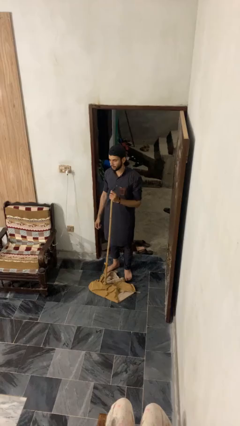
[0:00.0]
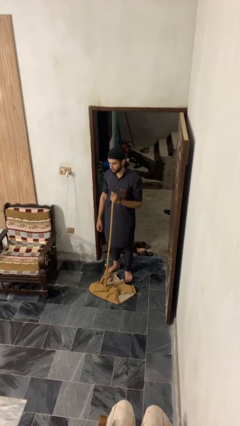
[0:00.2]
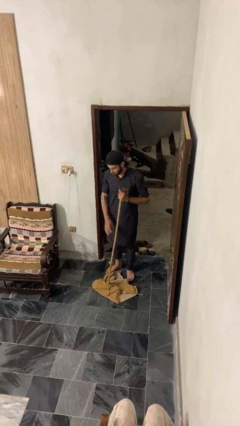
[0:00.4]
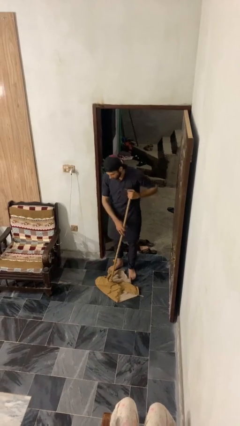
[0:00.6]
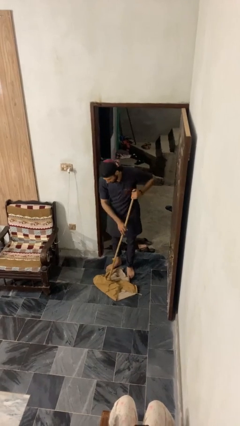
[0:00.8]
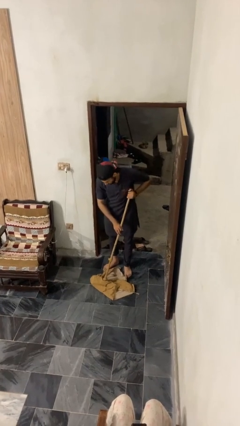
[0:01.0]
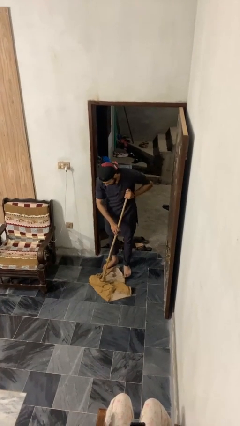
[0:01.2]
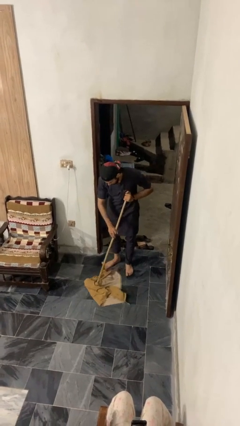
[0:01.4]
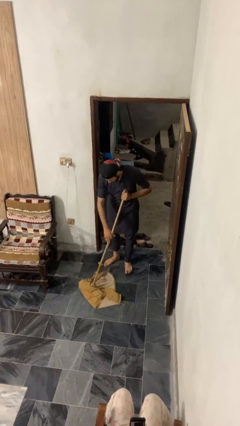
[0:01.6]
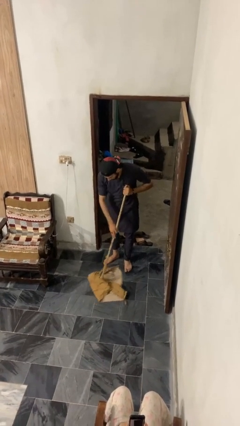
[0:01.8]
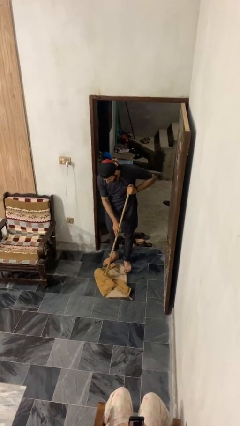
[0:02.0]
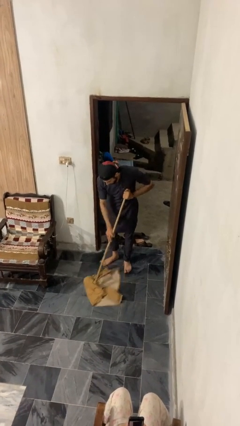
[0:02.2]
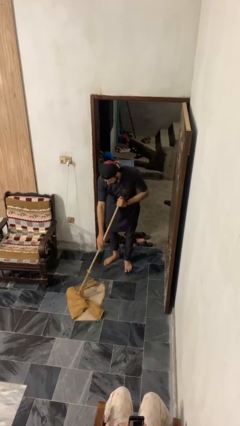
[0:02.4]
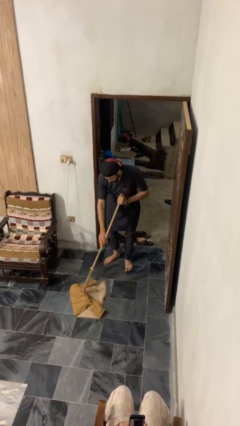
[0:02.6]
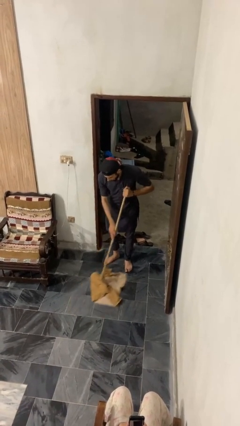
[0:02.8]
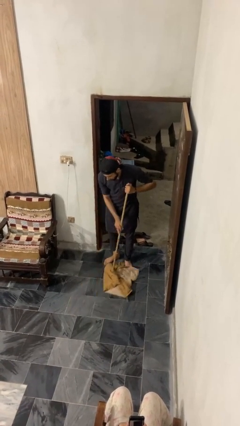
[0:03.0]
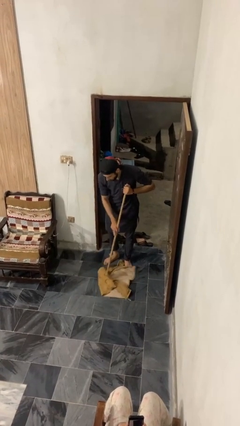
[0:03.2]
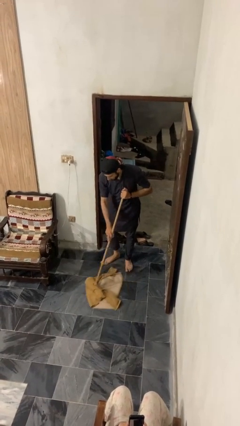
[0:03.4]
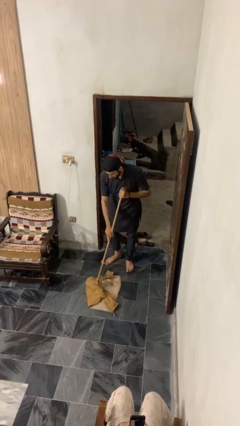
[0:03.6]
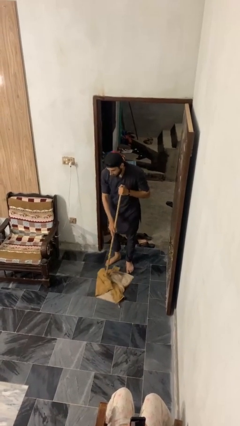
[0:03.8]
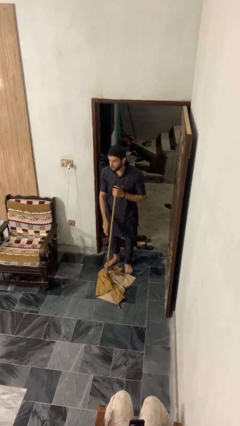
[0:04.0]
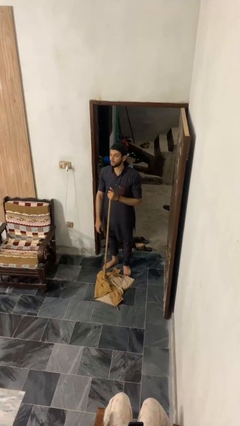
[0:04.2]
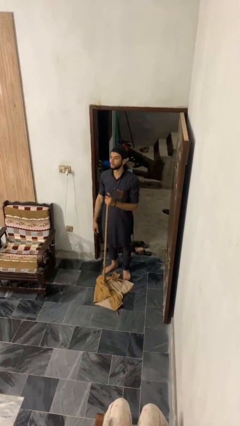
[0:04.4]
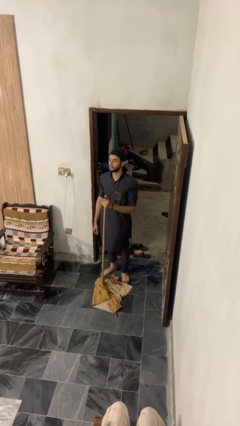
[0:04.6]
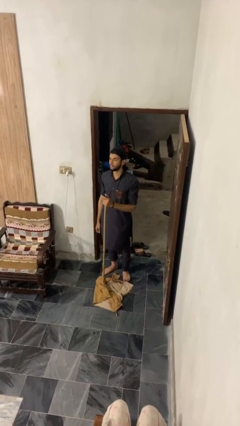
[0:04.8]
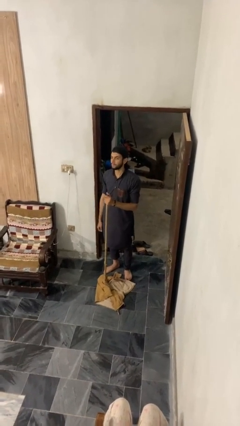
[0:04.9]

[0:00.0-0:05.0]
person mops

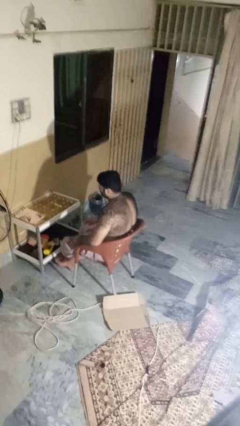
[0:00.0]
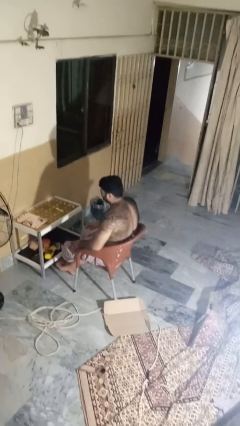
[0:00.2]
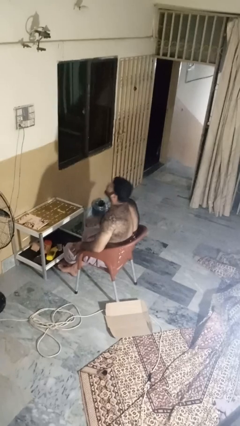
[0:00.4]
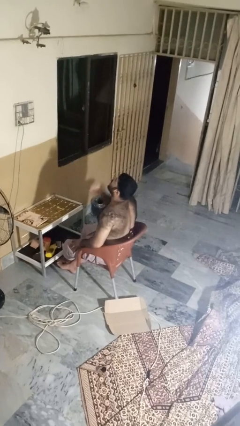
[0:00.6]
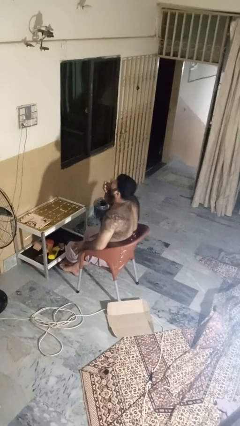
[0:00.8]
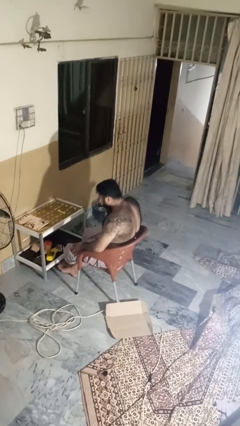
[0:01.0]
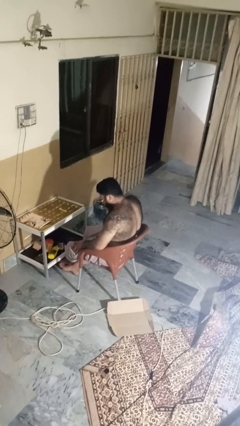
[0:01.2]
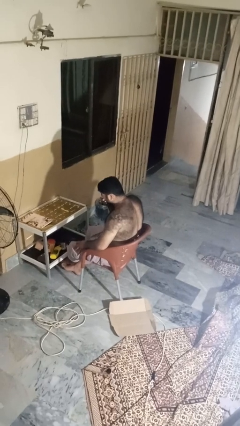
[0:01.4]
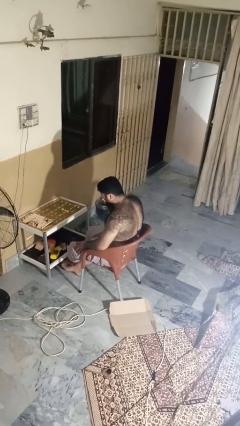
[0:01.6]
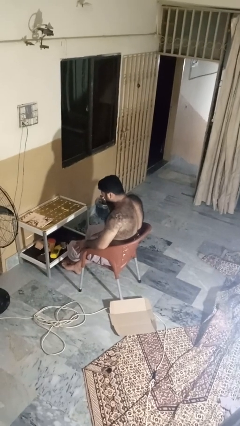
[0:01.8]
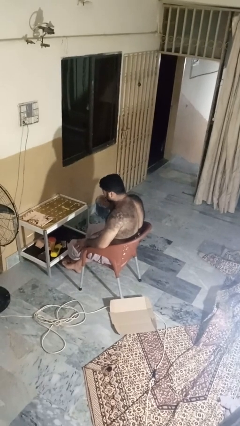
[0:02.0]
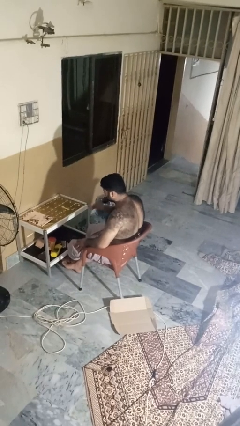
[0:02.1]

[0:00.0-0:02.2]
person sneezes into hand

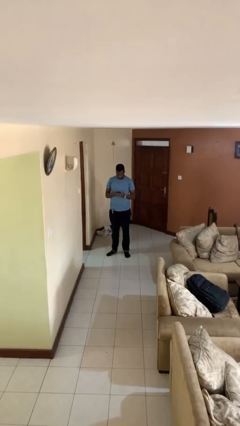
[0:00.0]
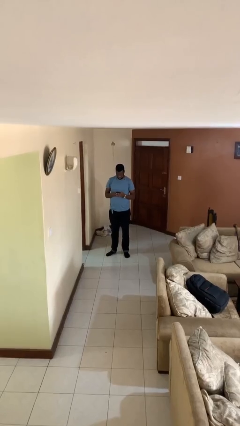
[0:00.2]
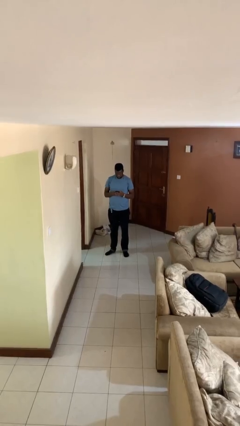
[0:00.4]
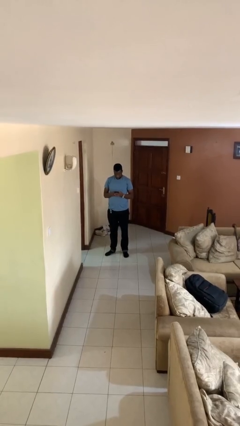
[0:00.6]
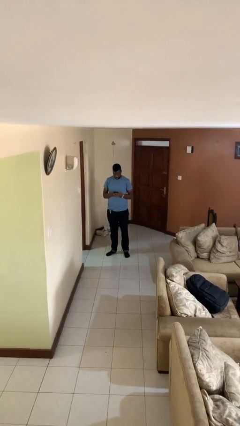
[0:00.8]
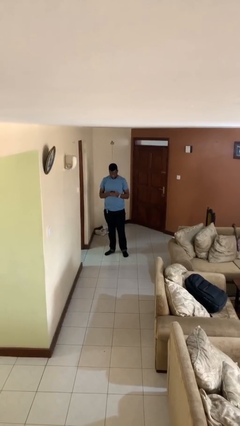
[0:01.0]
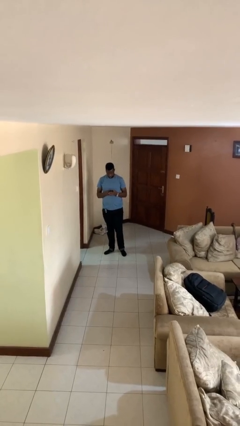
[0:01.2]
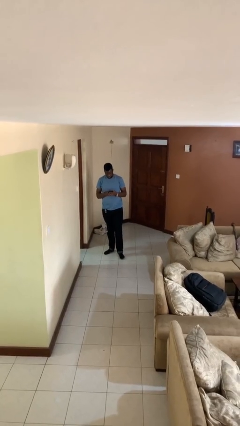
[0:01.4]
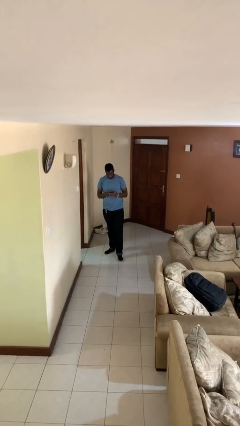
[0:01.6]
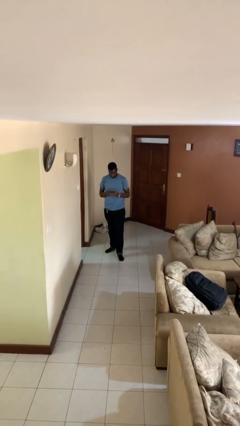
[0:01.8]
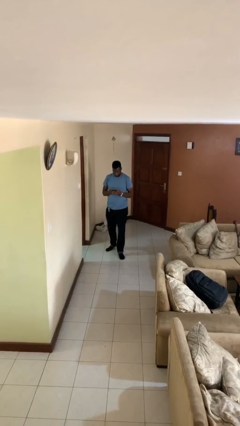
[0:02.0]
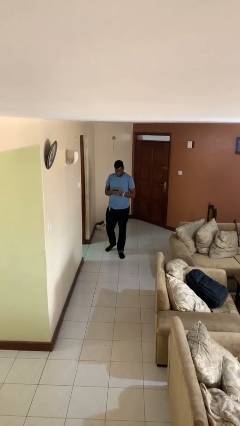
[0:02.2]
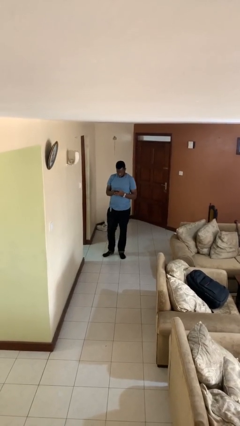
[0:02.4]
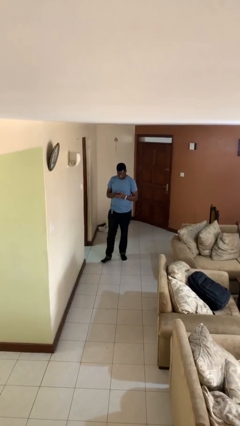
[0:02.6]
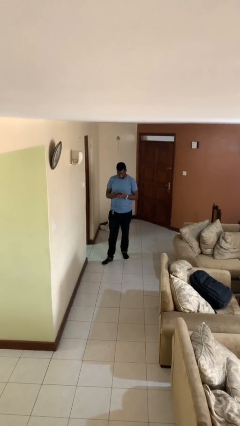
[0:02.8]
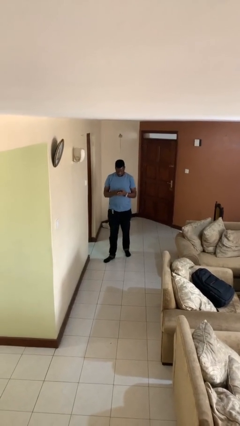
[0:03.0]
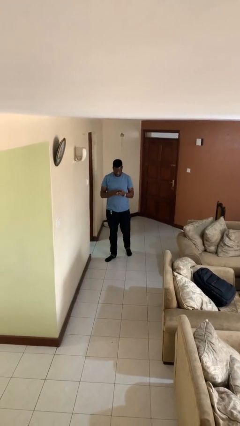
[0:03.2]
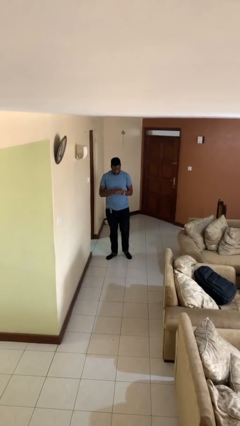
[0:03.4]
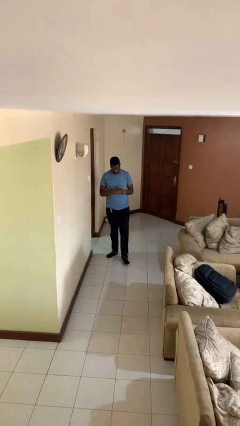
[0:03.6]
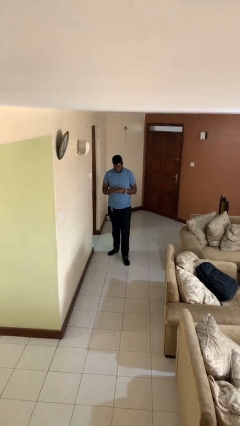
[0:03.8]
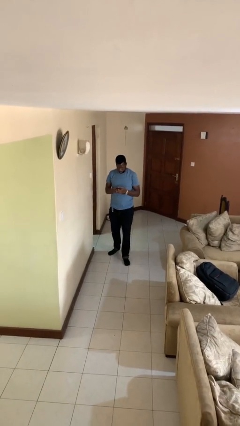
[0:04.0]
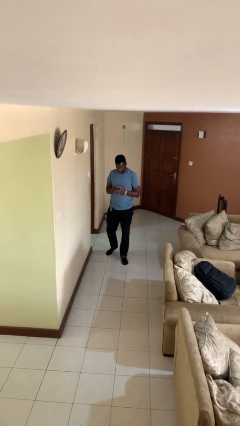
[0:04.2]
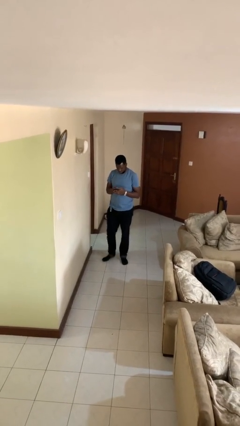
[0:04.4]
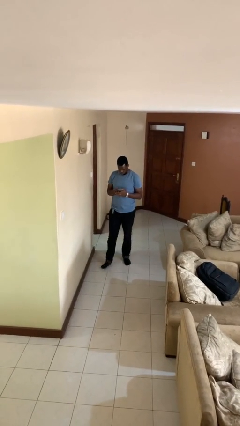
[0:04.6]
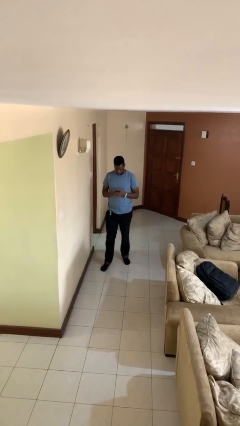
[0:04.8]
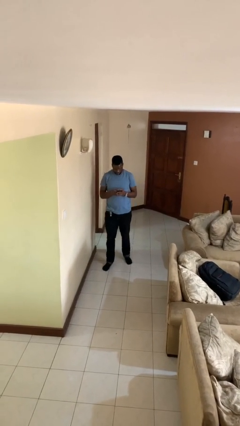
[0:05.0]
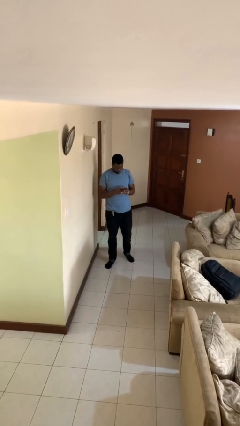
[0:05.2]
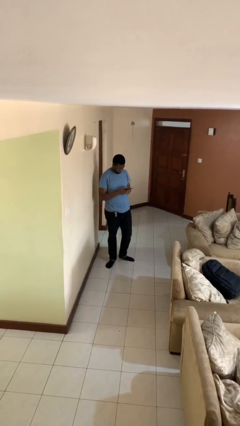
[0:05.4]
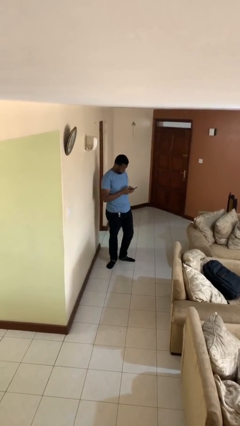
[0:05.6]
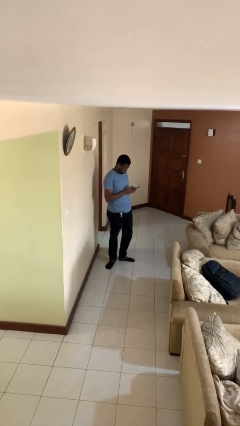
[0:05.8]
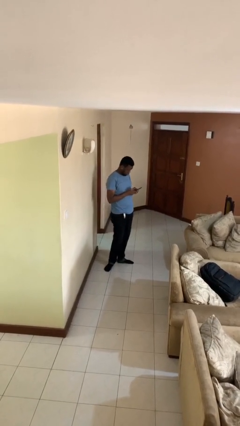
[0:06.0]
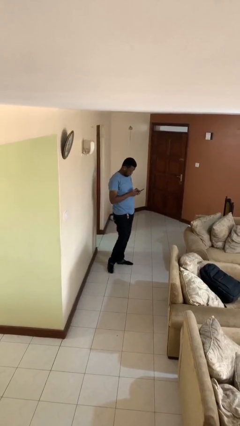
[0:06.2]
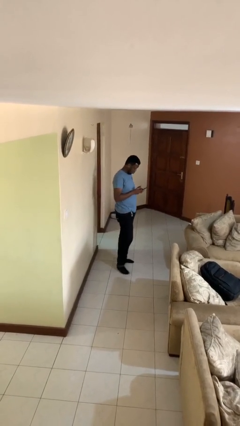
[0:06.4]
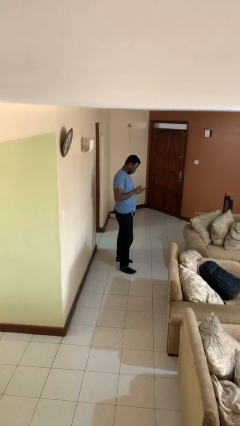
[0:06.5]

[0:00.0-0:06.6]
person texts on phone

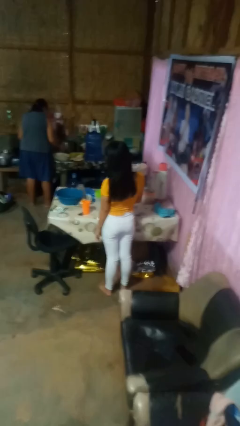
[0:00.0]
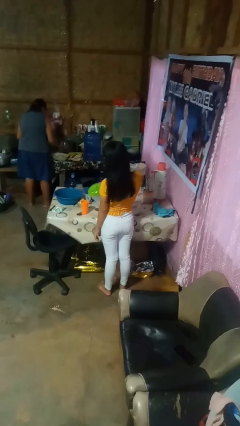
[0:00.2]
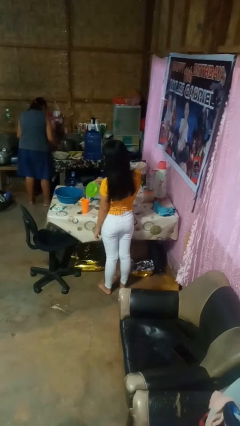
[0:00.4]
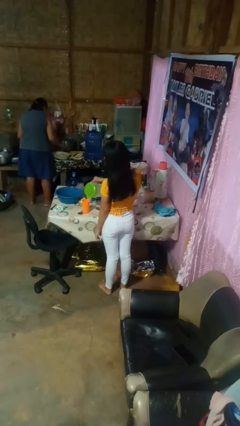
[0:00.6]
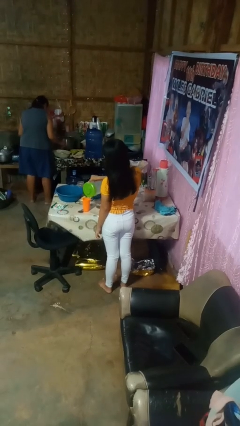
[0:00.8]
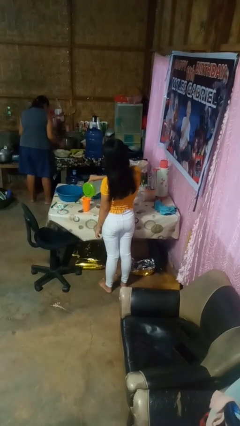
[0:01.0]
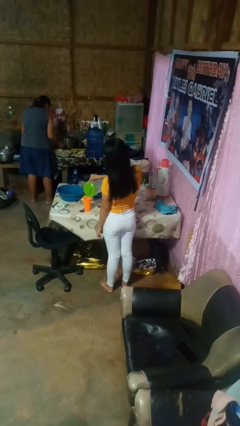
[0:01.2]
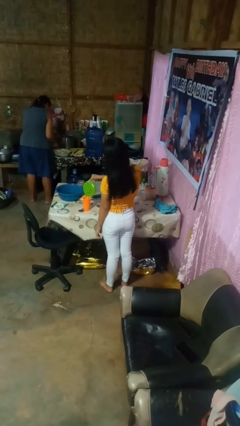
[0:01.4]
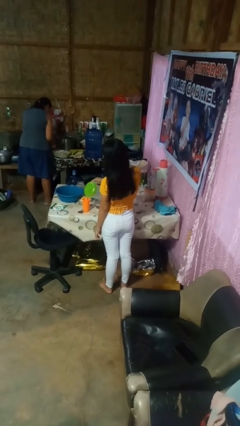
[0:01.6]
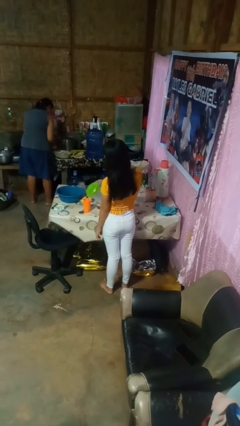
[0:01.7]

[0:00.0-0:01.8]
person pours liquid into cup

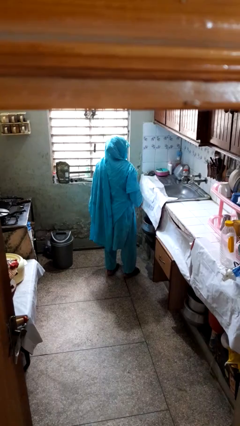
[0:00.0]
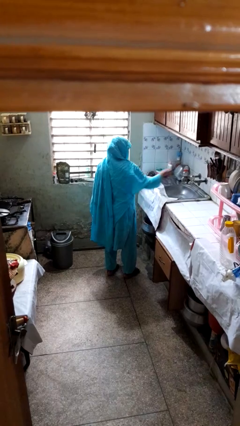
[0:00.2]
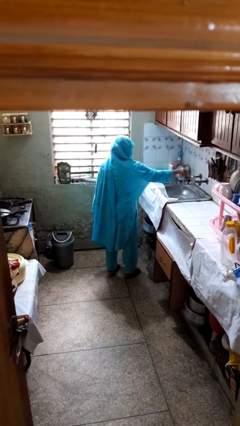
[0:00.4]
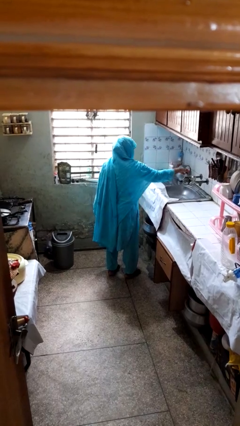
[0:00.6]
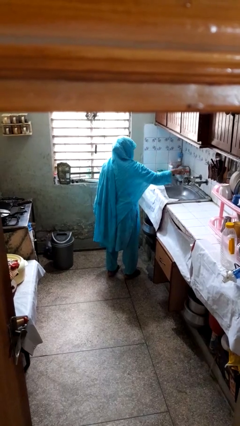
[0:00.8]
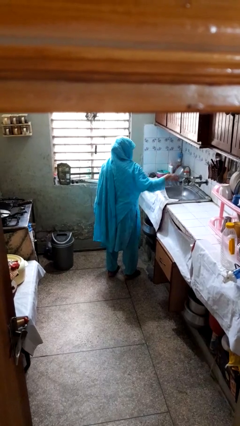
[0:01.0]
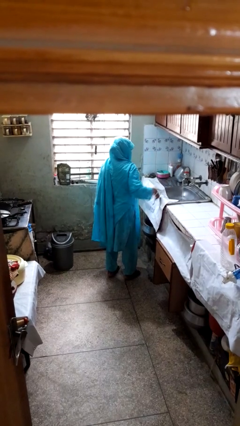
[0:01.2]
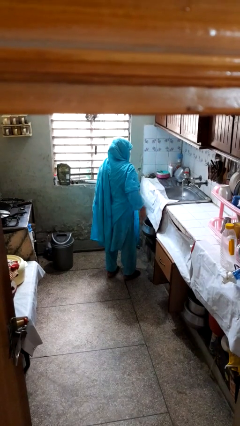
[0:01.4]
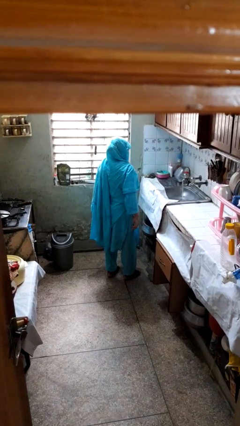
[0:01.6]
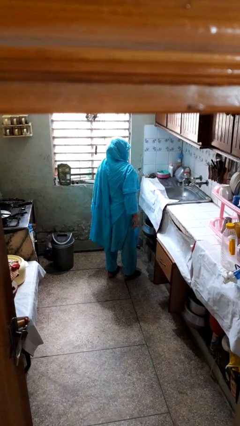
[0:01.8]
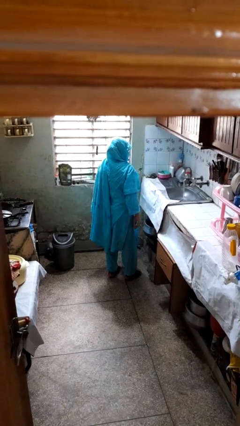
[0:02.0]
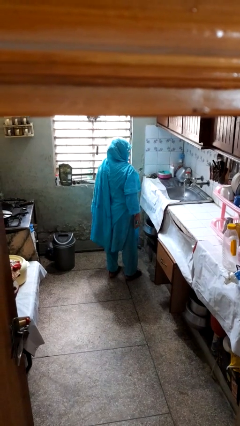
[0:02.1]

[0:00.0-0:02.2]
person turns on faucet
